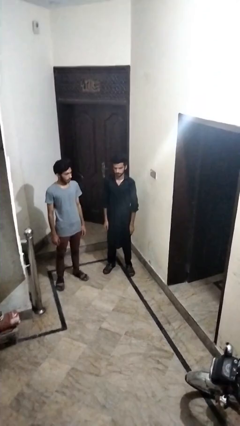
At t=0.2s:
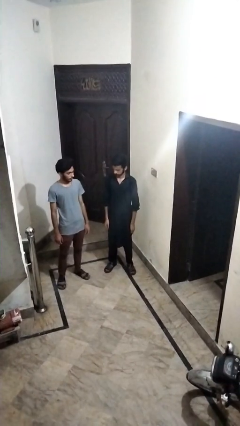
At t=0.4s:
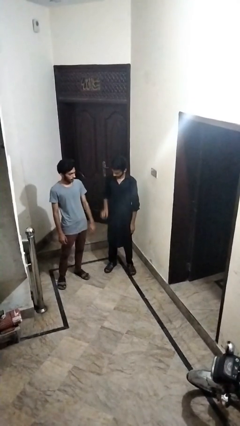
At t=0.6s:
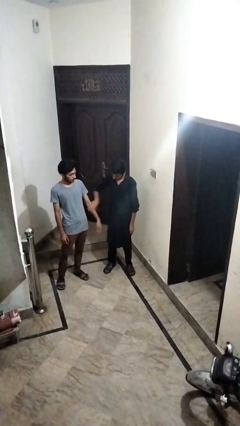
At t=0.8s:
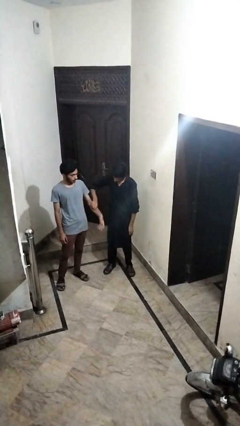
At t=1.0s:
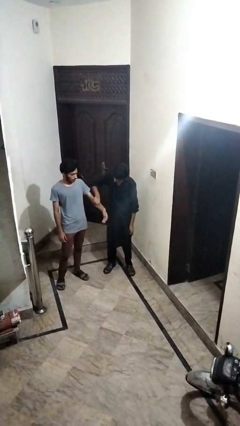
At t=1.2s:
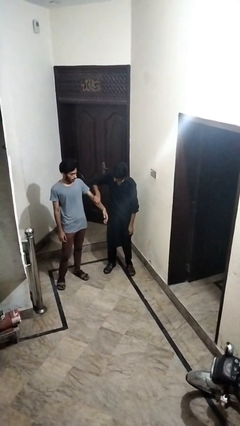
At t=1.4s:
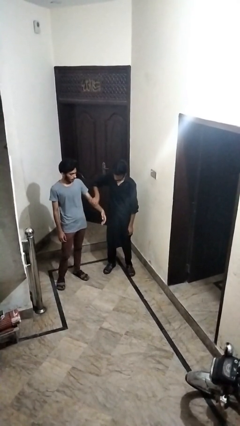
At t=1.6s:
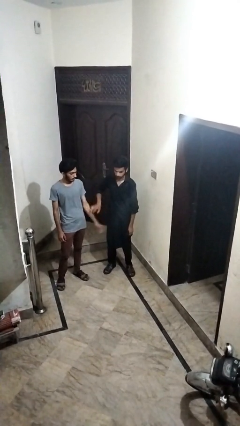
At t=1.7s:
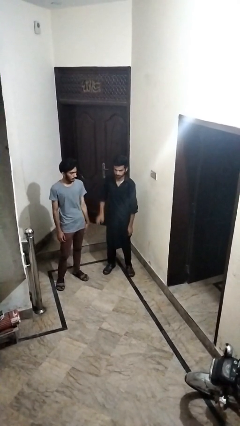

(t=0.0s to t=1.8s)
person grabs person by forearm

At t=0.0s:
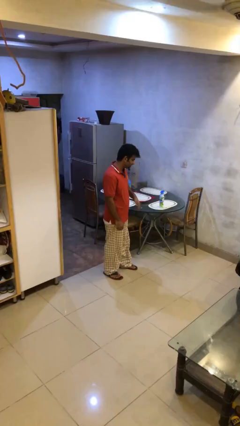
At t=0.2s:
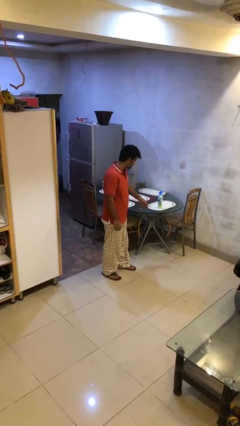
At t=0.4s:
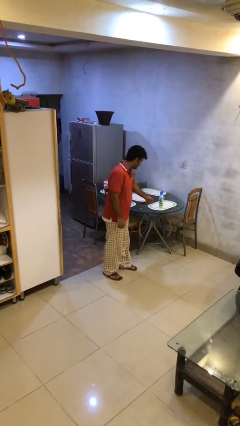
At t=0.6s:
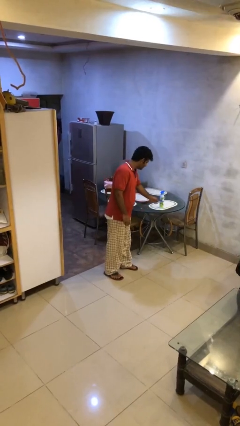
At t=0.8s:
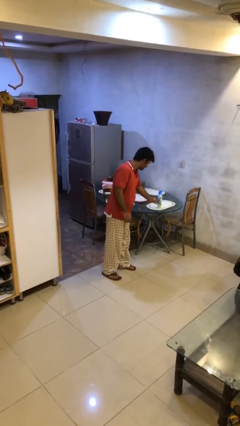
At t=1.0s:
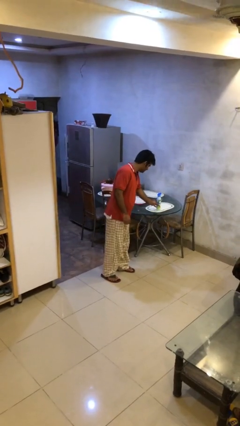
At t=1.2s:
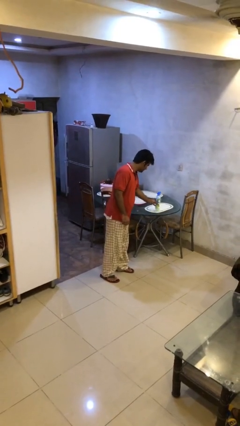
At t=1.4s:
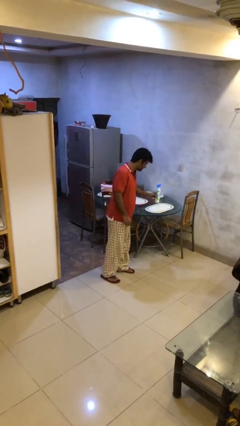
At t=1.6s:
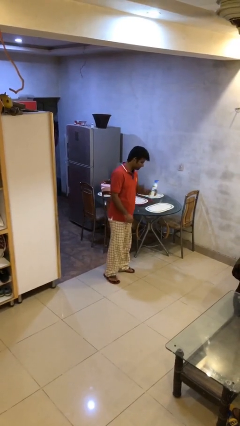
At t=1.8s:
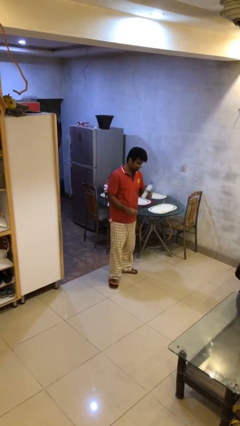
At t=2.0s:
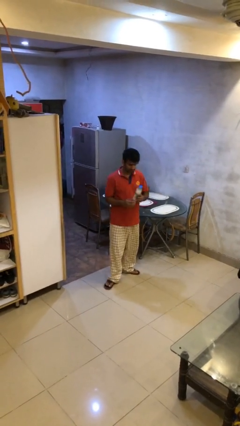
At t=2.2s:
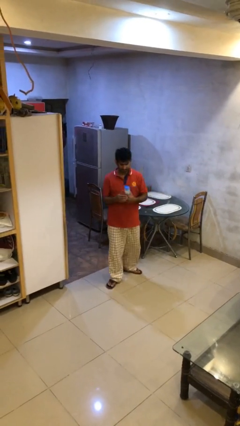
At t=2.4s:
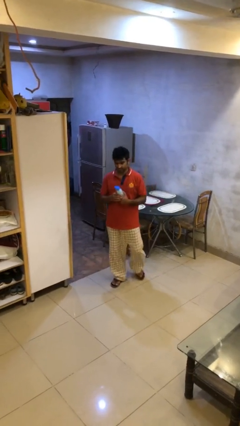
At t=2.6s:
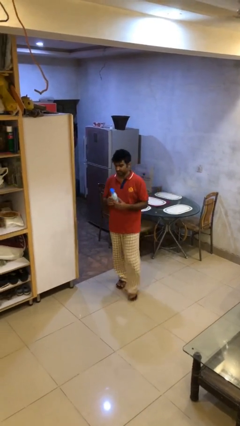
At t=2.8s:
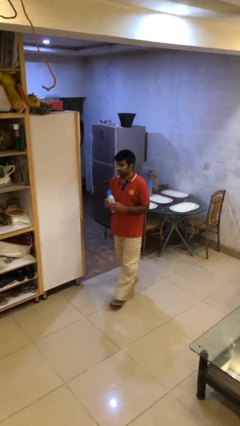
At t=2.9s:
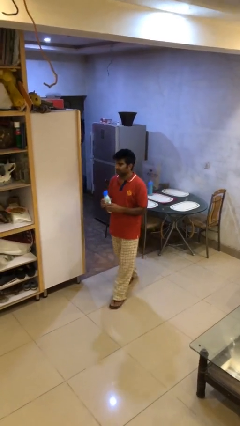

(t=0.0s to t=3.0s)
person picks up object from table

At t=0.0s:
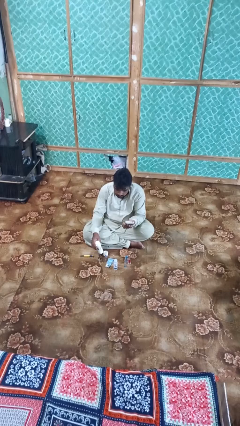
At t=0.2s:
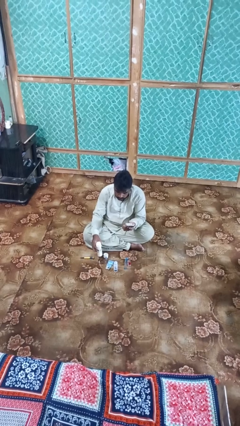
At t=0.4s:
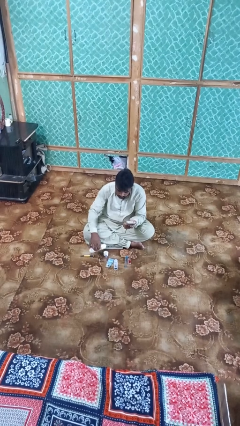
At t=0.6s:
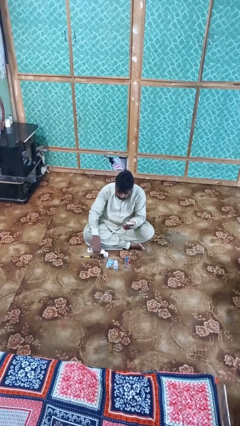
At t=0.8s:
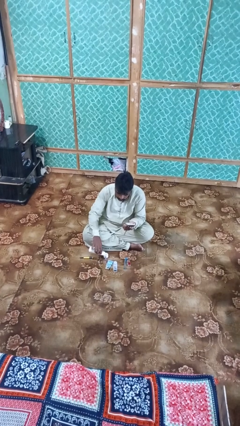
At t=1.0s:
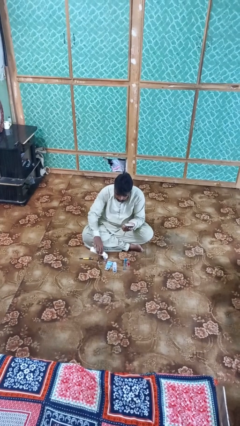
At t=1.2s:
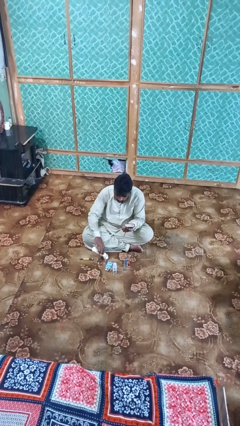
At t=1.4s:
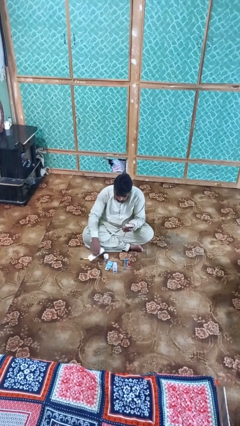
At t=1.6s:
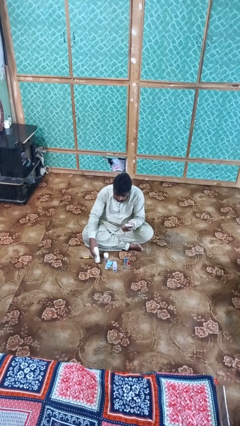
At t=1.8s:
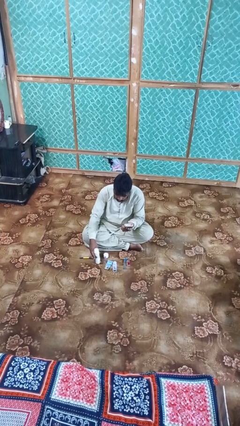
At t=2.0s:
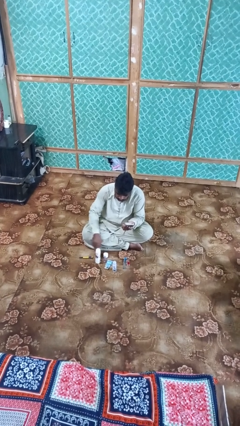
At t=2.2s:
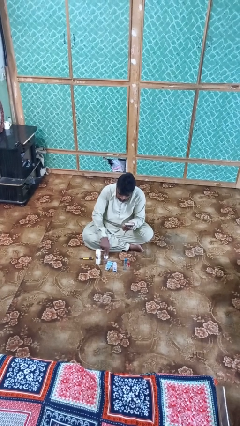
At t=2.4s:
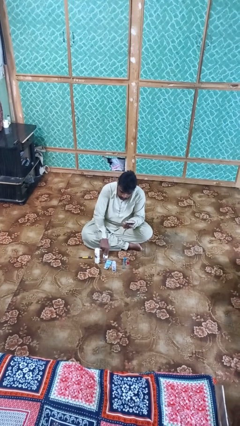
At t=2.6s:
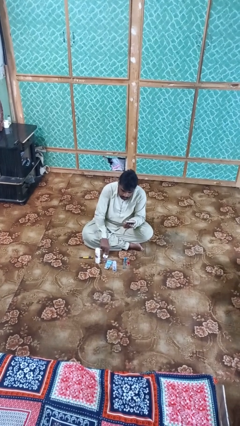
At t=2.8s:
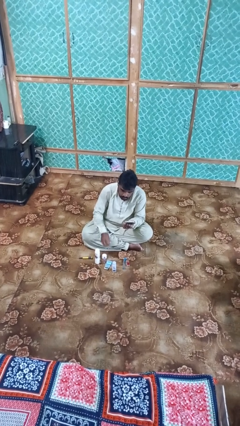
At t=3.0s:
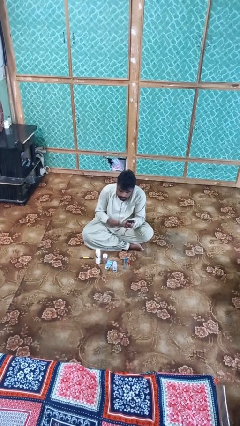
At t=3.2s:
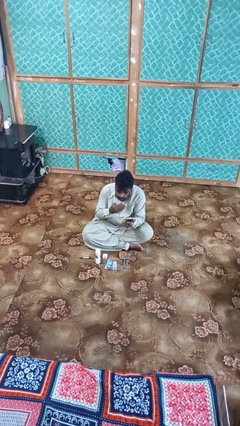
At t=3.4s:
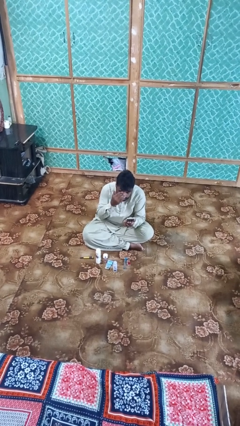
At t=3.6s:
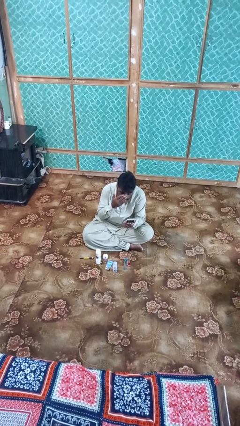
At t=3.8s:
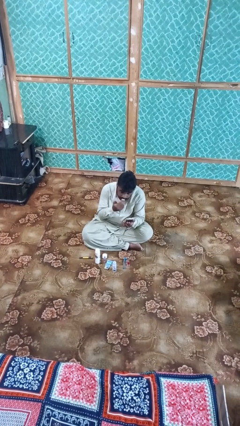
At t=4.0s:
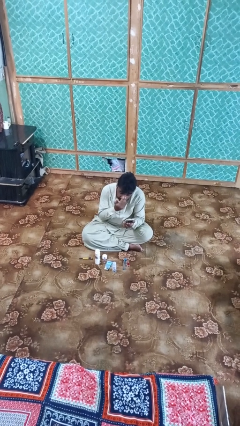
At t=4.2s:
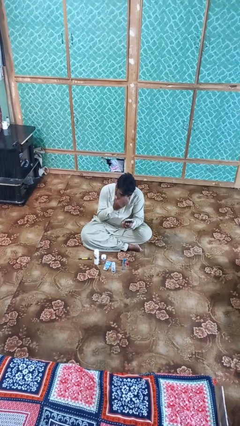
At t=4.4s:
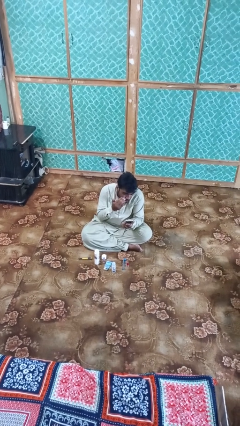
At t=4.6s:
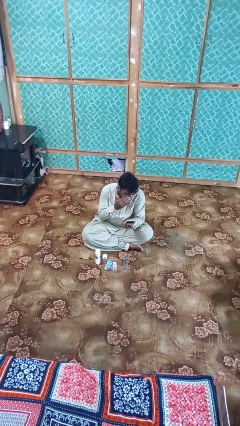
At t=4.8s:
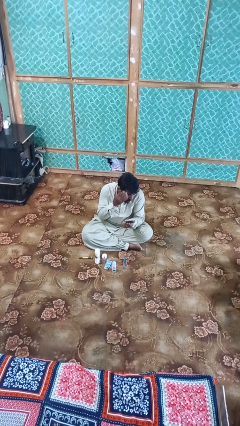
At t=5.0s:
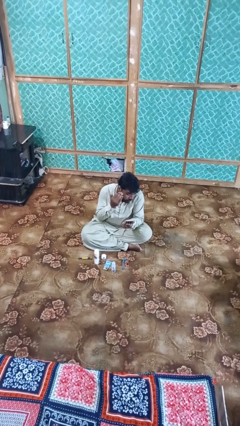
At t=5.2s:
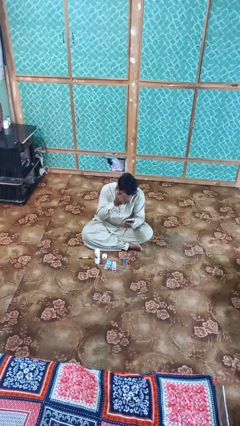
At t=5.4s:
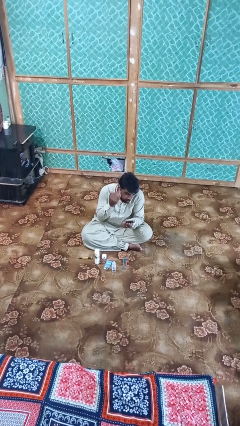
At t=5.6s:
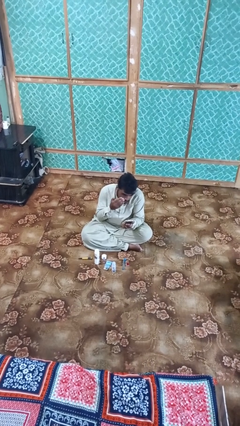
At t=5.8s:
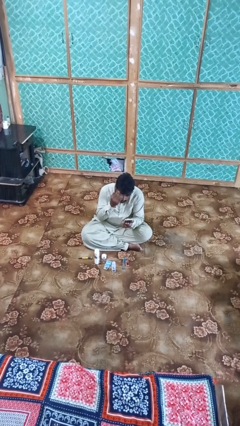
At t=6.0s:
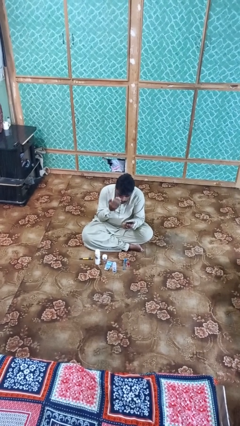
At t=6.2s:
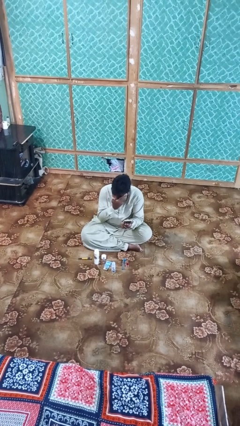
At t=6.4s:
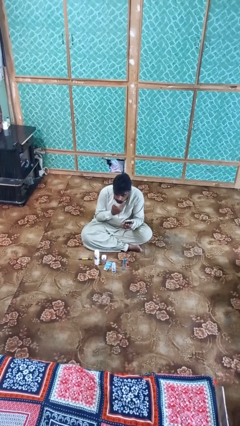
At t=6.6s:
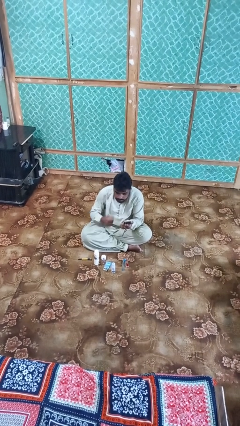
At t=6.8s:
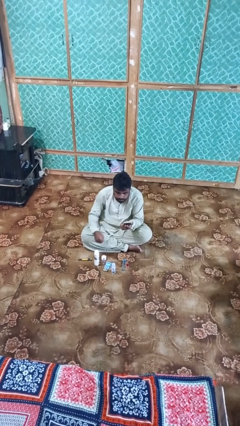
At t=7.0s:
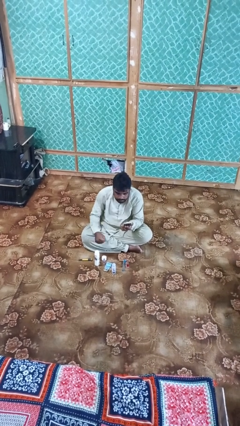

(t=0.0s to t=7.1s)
person applies foundation makeup

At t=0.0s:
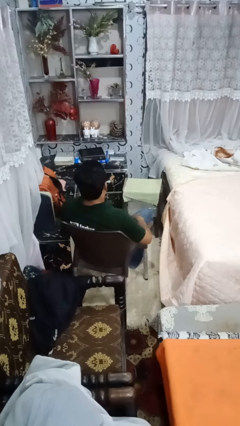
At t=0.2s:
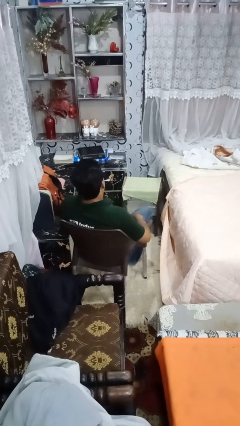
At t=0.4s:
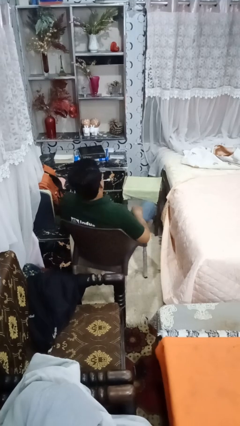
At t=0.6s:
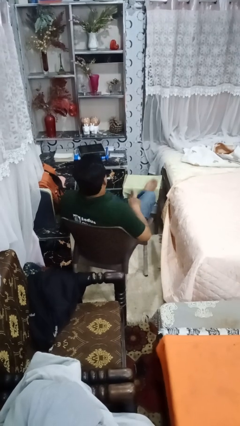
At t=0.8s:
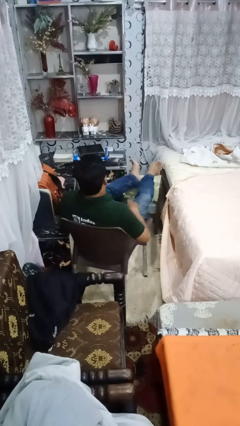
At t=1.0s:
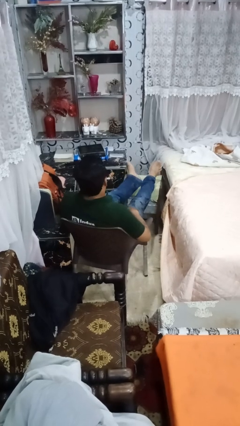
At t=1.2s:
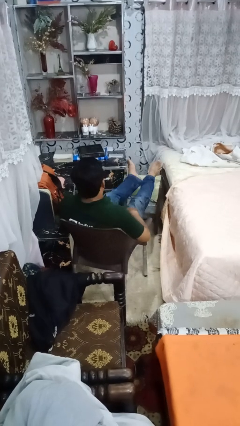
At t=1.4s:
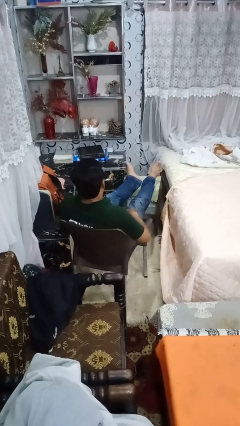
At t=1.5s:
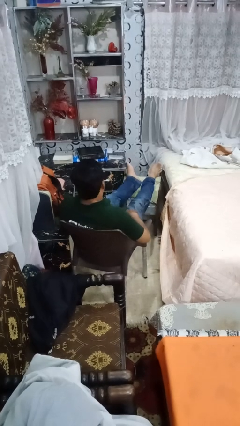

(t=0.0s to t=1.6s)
person puts feet up

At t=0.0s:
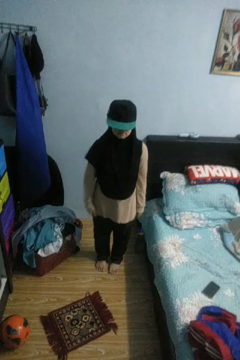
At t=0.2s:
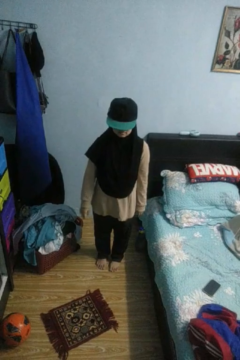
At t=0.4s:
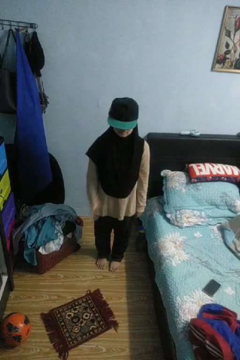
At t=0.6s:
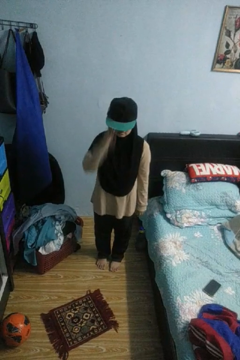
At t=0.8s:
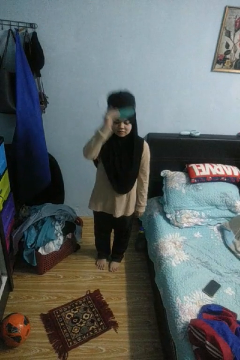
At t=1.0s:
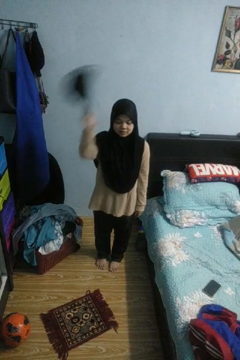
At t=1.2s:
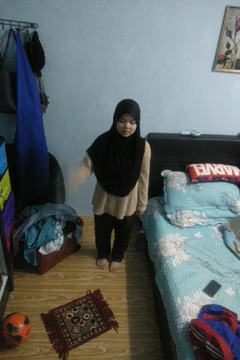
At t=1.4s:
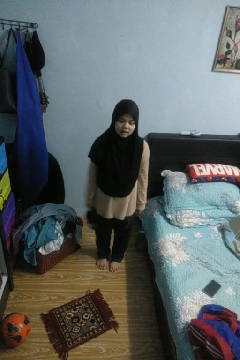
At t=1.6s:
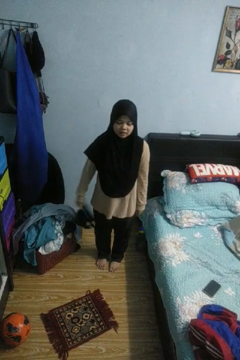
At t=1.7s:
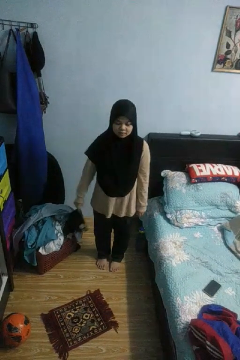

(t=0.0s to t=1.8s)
person takes off hat

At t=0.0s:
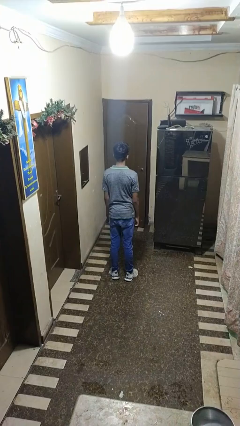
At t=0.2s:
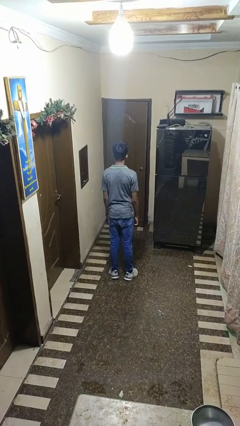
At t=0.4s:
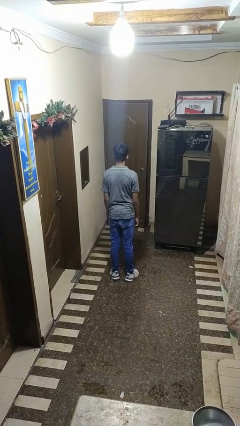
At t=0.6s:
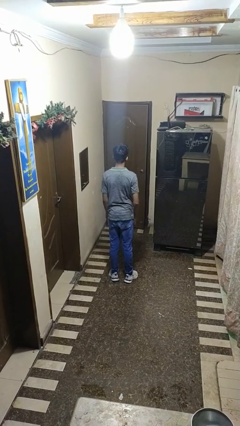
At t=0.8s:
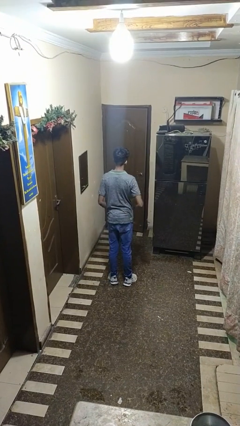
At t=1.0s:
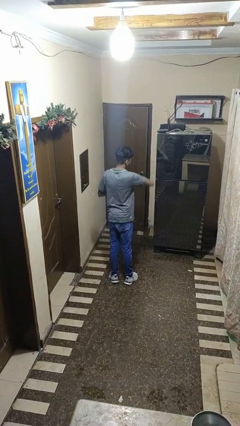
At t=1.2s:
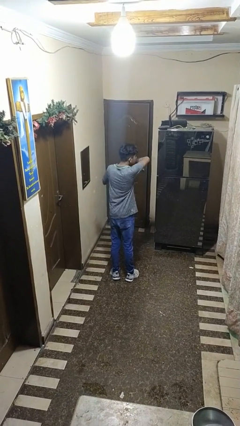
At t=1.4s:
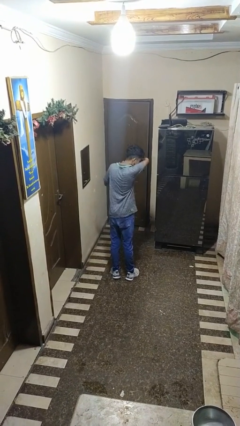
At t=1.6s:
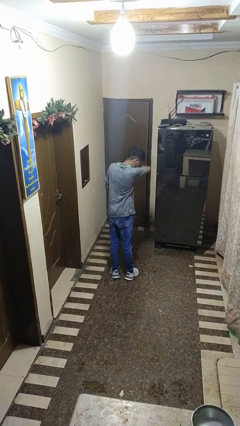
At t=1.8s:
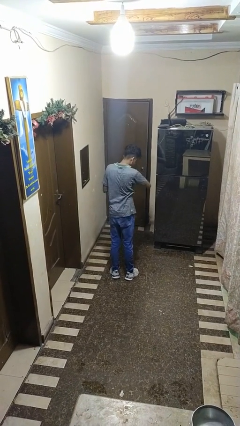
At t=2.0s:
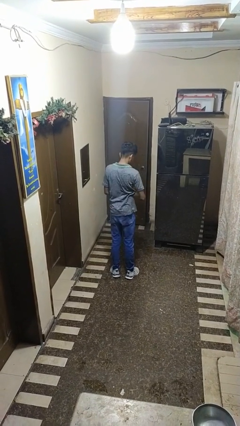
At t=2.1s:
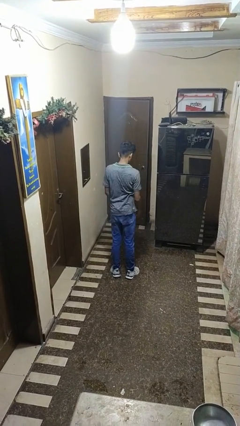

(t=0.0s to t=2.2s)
person sneezes into arm
